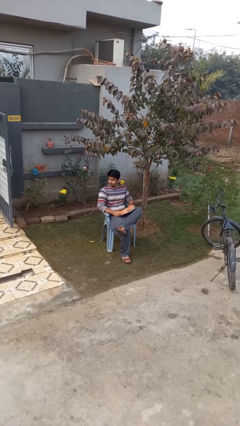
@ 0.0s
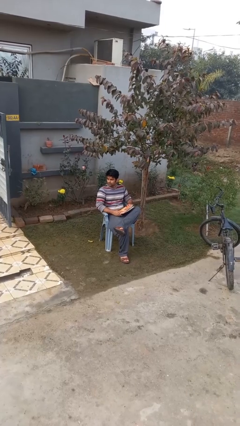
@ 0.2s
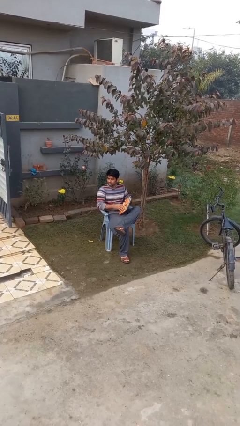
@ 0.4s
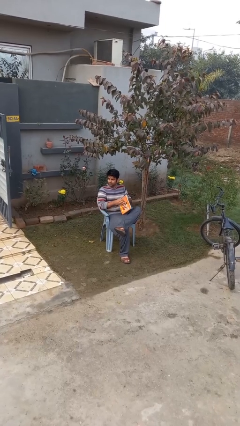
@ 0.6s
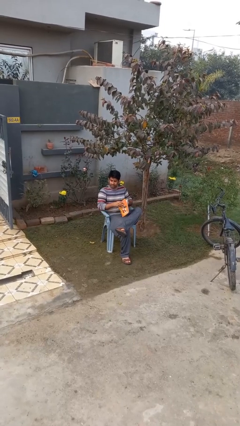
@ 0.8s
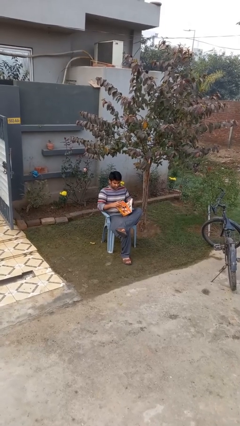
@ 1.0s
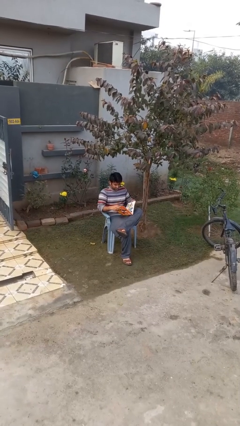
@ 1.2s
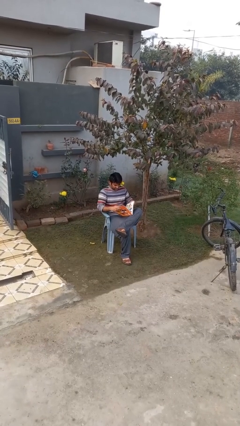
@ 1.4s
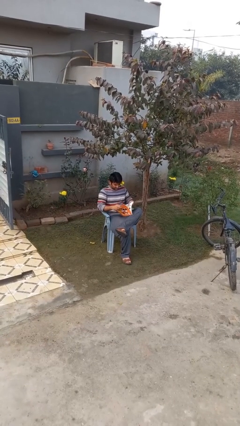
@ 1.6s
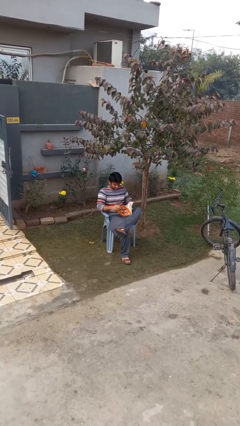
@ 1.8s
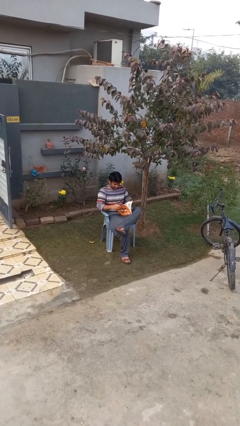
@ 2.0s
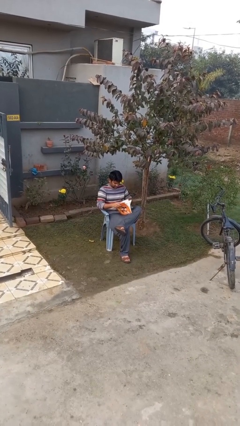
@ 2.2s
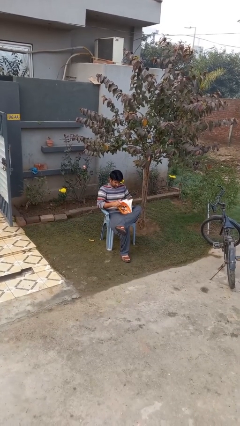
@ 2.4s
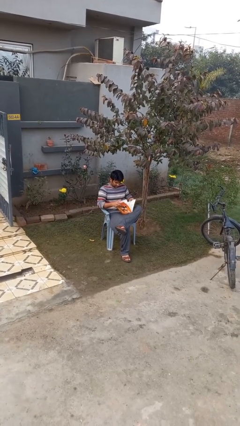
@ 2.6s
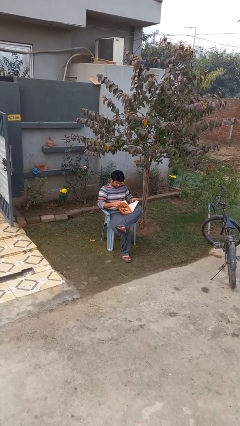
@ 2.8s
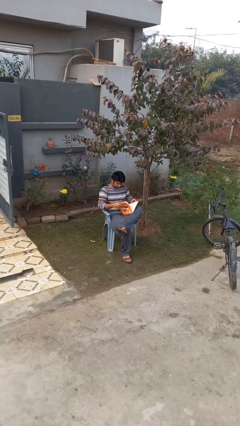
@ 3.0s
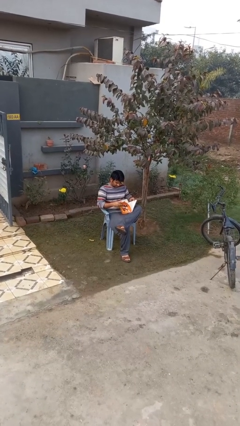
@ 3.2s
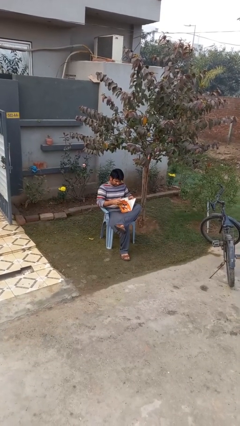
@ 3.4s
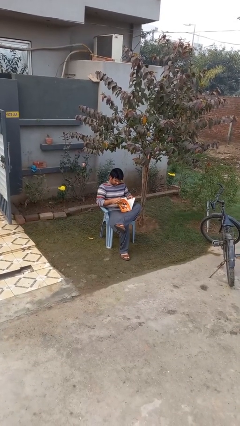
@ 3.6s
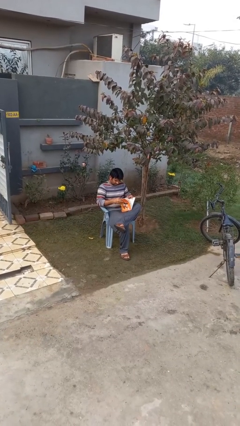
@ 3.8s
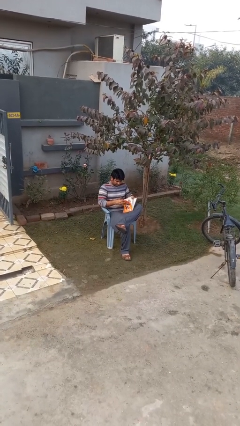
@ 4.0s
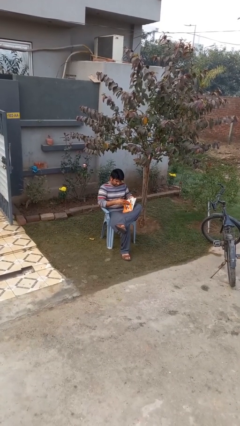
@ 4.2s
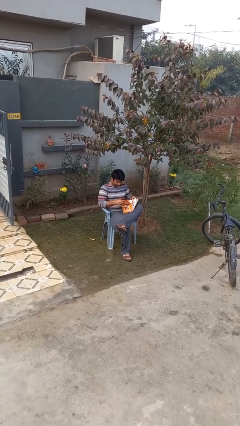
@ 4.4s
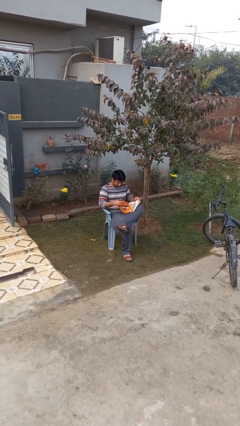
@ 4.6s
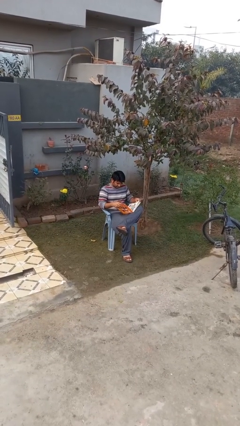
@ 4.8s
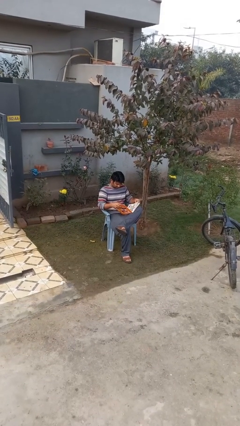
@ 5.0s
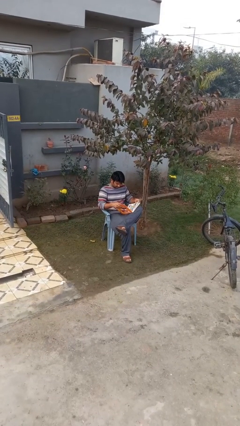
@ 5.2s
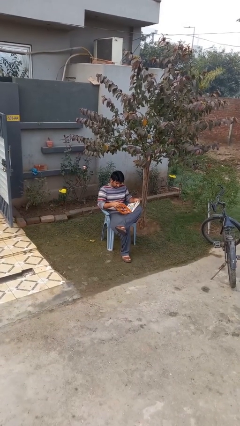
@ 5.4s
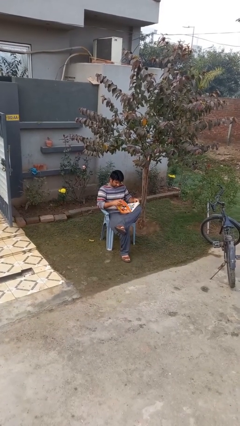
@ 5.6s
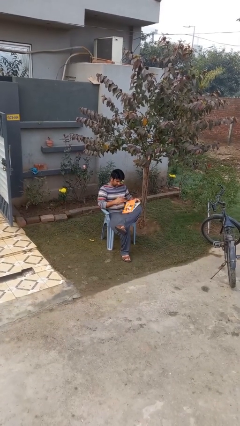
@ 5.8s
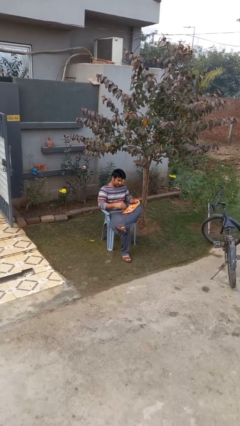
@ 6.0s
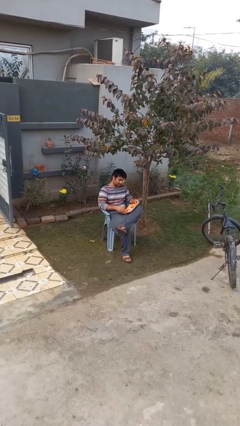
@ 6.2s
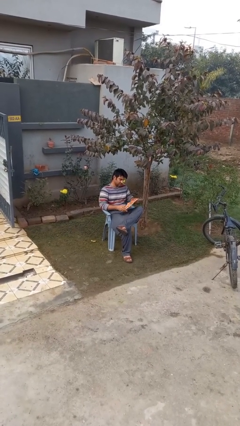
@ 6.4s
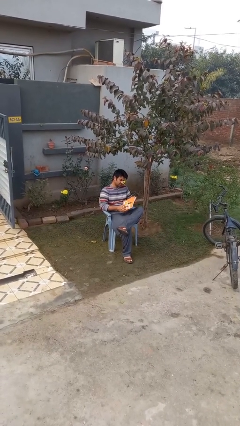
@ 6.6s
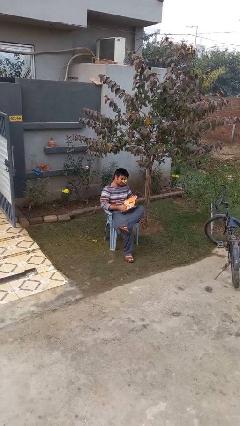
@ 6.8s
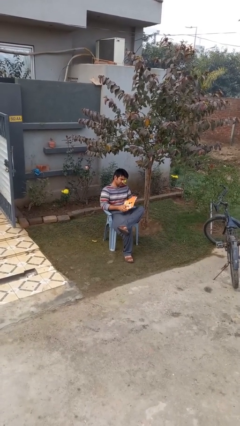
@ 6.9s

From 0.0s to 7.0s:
person reads document

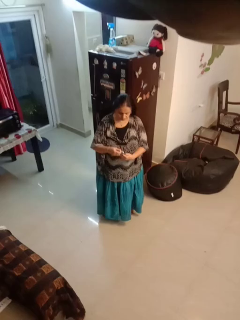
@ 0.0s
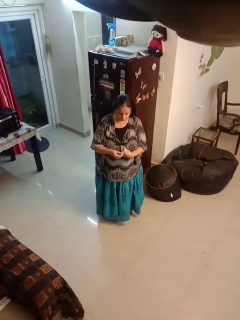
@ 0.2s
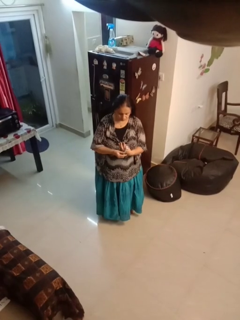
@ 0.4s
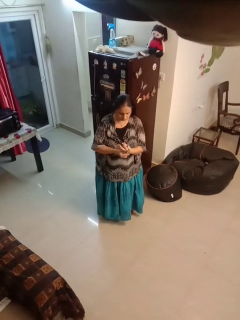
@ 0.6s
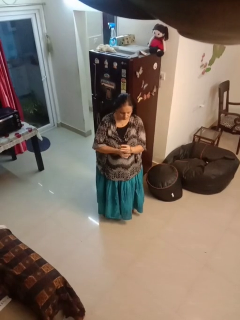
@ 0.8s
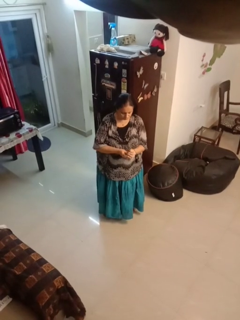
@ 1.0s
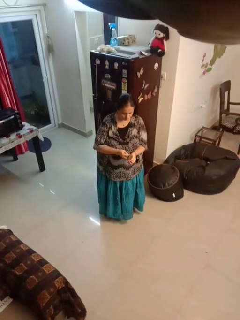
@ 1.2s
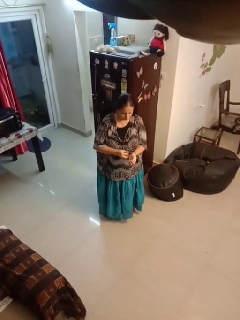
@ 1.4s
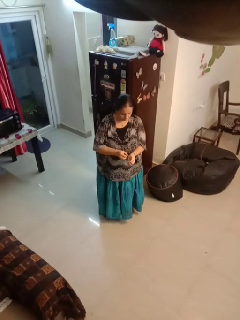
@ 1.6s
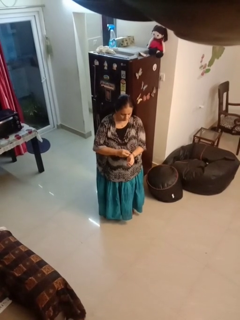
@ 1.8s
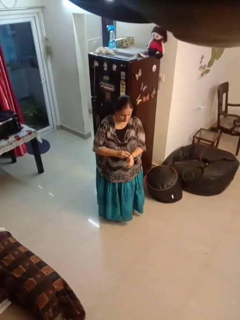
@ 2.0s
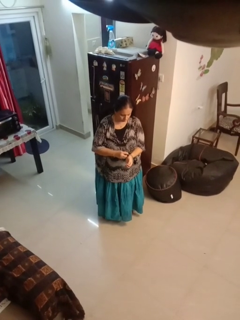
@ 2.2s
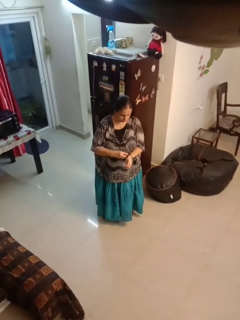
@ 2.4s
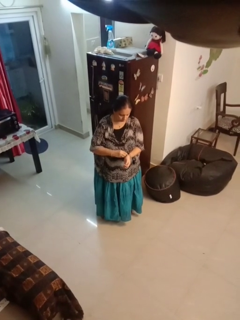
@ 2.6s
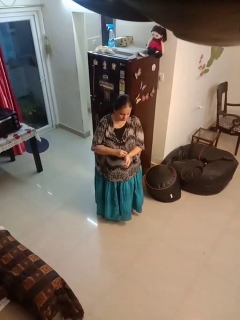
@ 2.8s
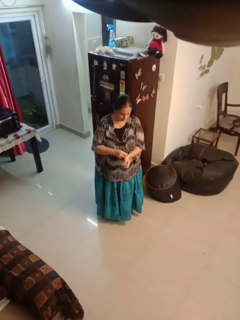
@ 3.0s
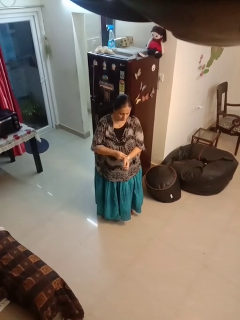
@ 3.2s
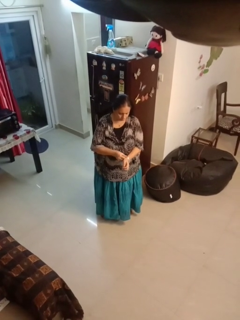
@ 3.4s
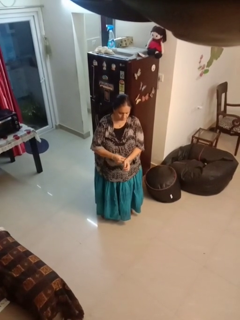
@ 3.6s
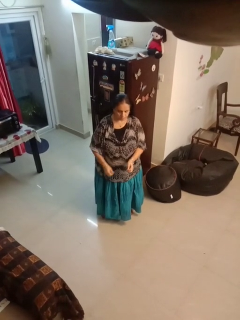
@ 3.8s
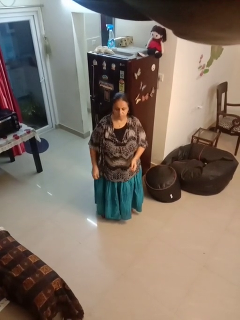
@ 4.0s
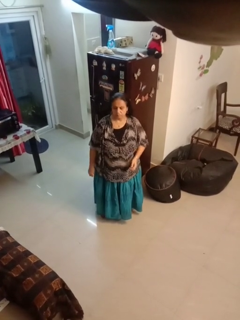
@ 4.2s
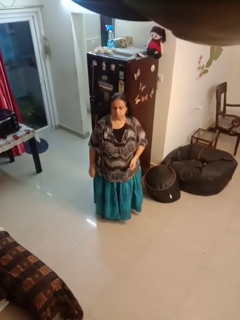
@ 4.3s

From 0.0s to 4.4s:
person puts on wristwatch

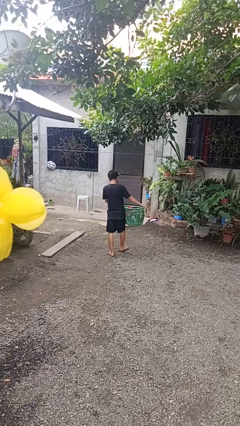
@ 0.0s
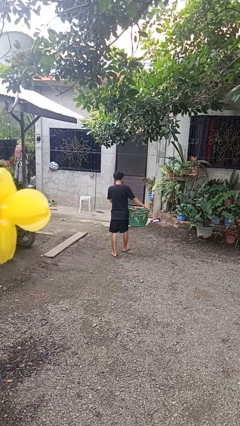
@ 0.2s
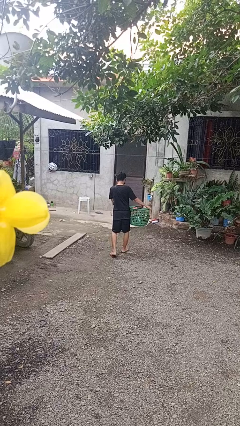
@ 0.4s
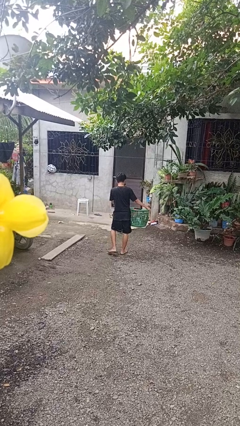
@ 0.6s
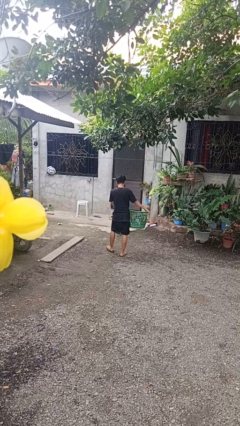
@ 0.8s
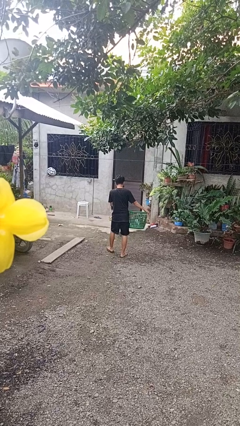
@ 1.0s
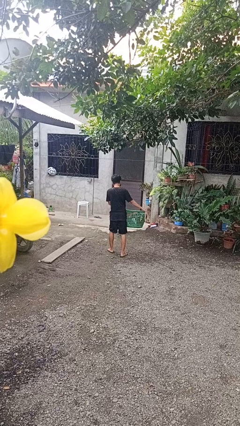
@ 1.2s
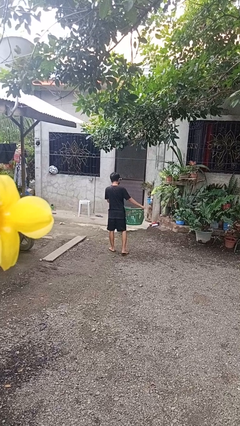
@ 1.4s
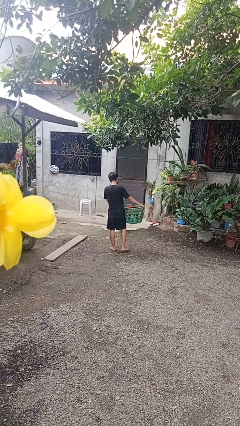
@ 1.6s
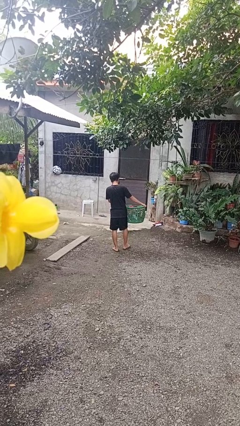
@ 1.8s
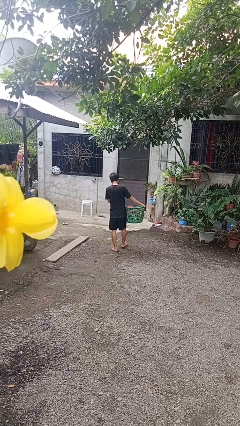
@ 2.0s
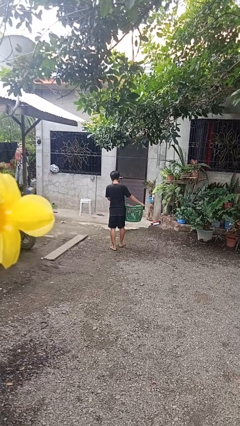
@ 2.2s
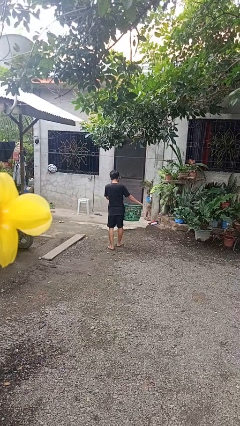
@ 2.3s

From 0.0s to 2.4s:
person carries laundry basket

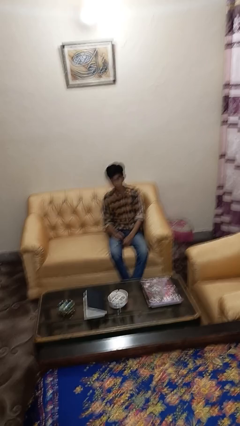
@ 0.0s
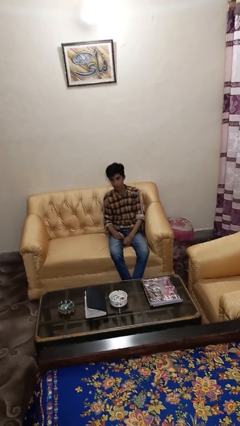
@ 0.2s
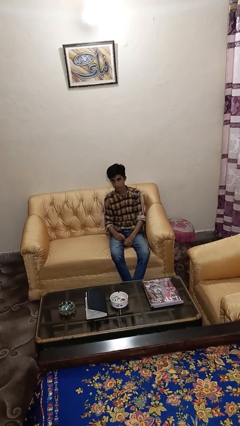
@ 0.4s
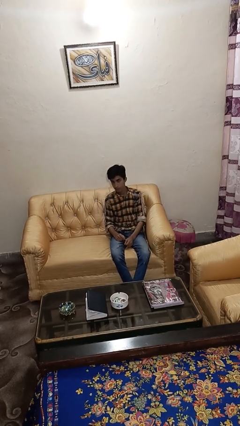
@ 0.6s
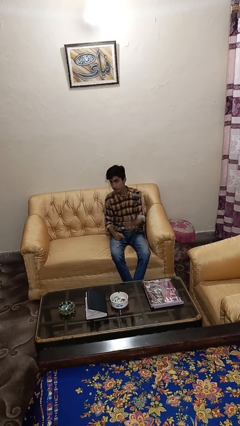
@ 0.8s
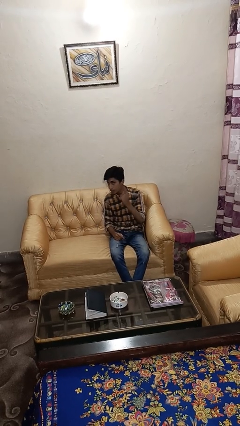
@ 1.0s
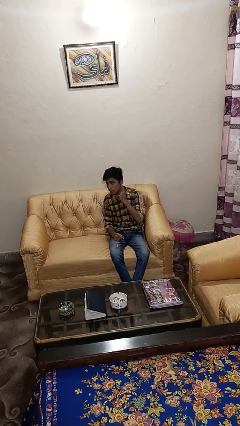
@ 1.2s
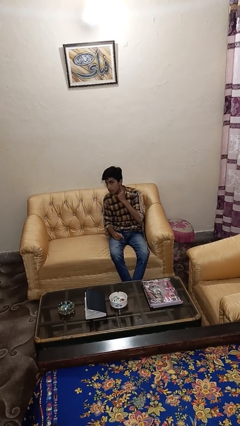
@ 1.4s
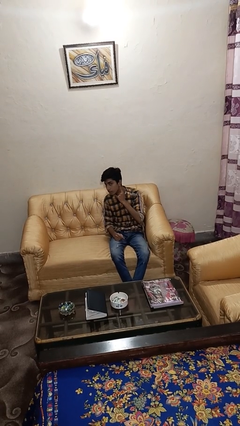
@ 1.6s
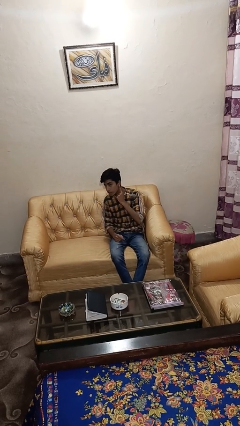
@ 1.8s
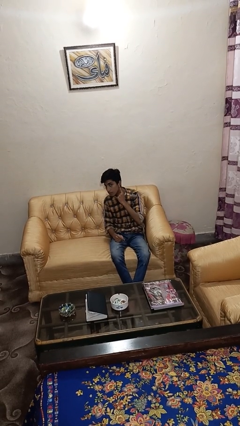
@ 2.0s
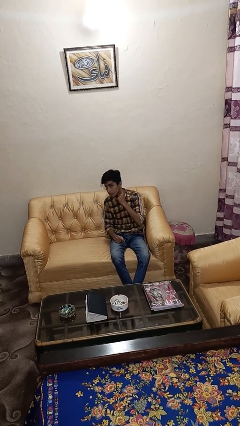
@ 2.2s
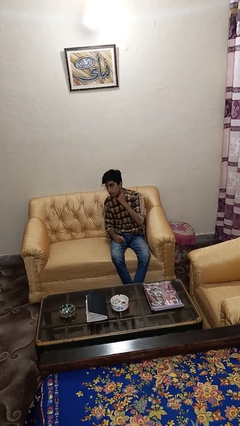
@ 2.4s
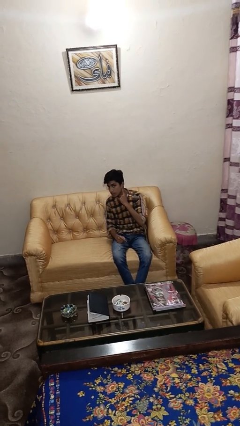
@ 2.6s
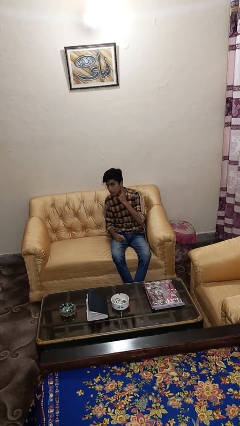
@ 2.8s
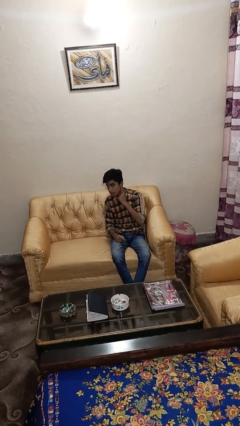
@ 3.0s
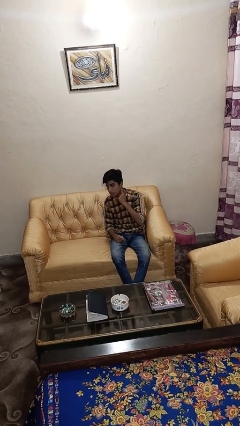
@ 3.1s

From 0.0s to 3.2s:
person gestures listen closely

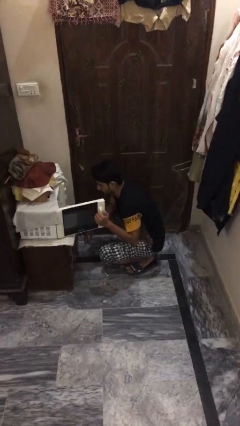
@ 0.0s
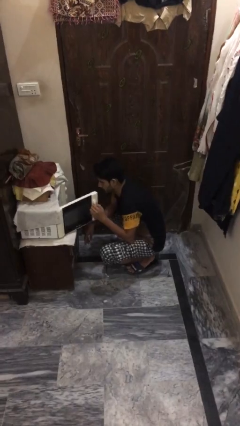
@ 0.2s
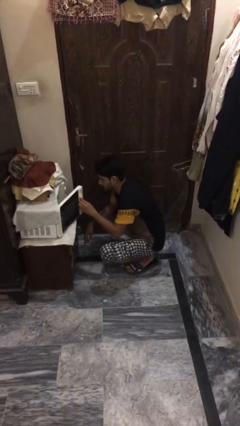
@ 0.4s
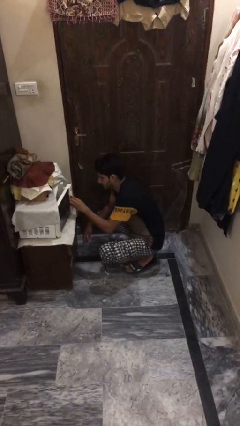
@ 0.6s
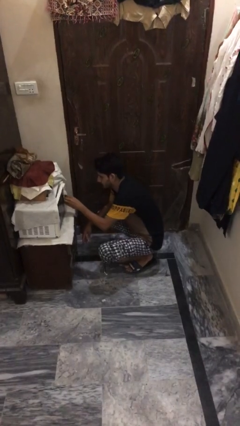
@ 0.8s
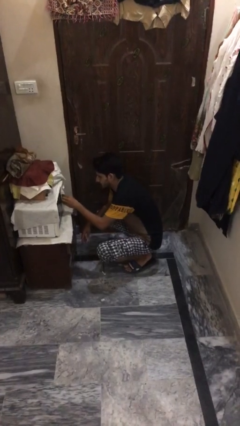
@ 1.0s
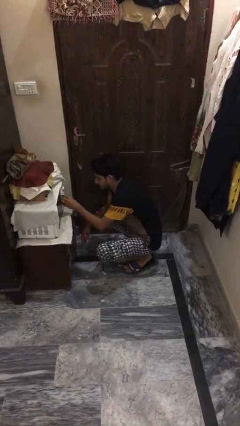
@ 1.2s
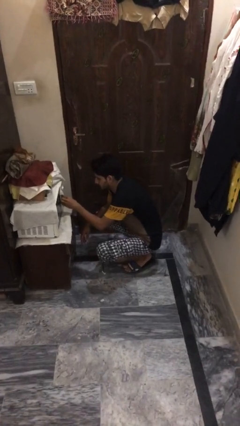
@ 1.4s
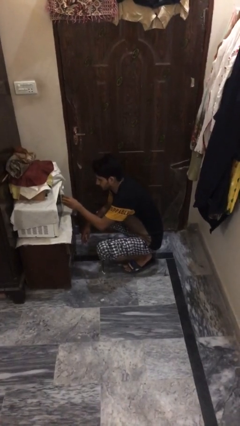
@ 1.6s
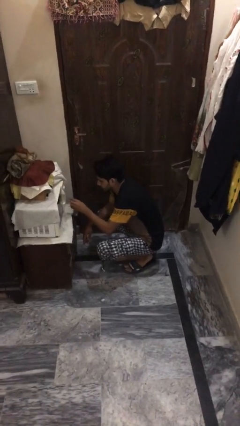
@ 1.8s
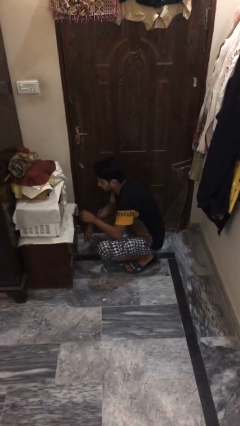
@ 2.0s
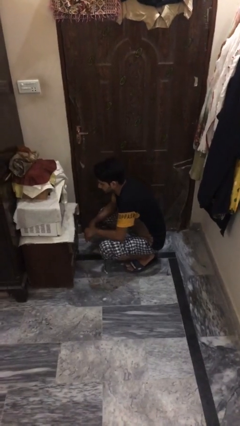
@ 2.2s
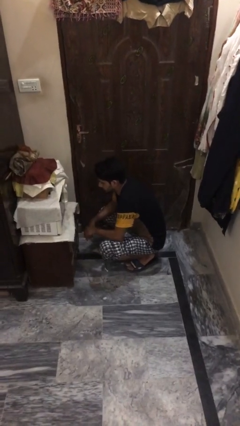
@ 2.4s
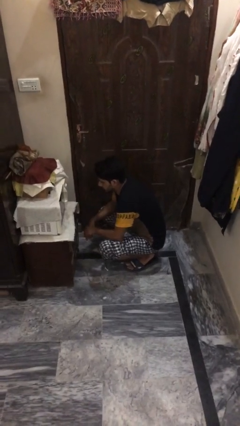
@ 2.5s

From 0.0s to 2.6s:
person closes microwave
